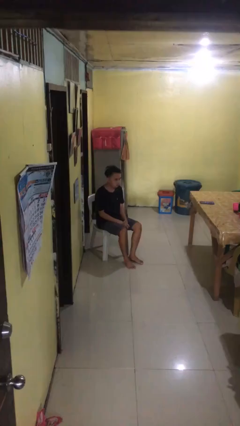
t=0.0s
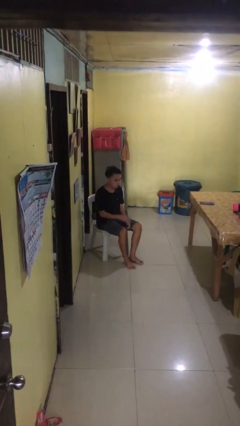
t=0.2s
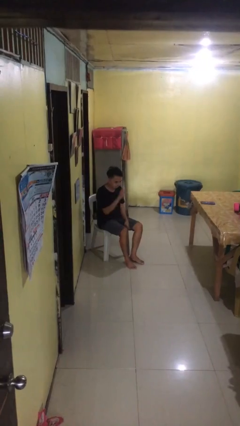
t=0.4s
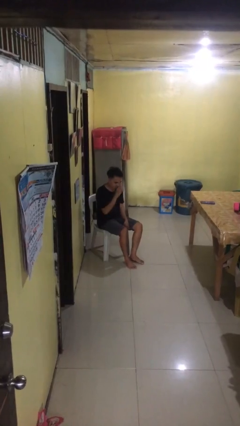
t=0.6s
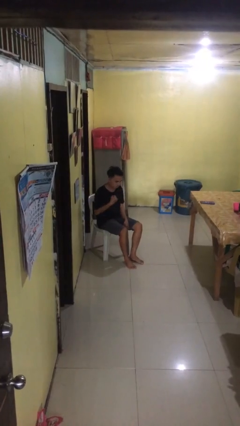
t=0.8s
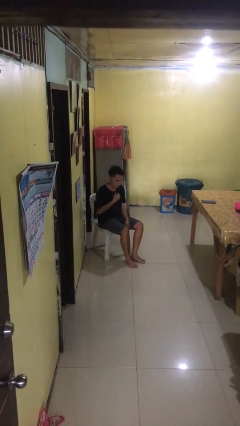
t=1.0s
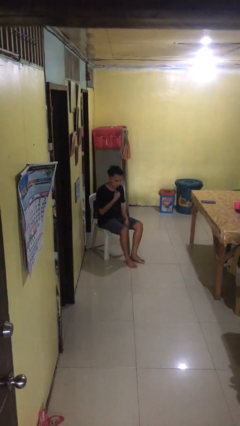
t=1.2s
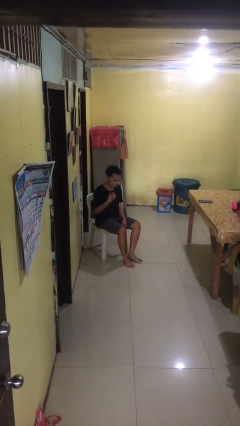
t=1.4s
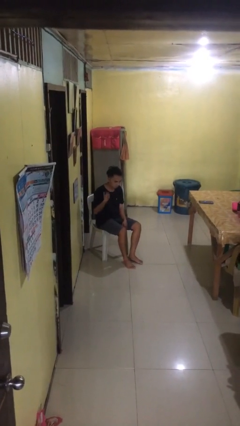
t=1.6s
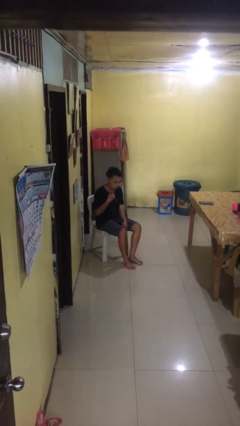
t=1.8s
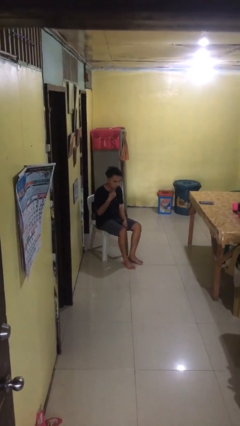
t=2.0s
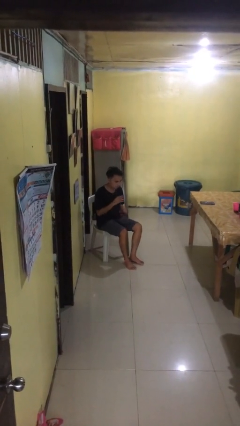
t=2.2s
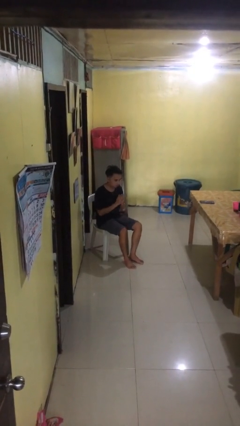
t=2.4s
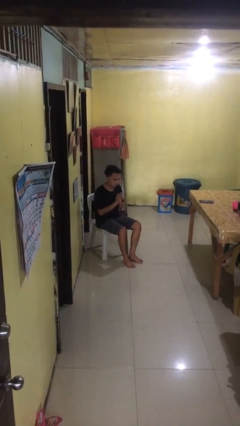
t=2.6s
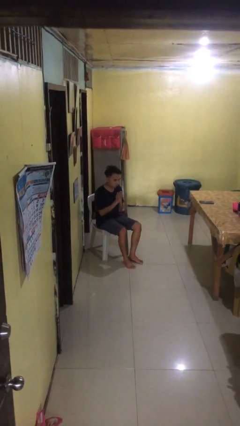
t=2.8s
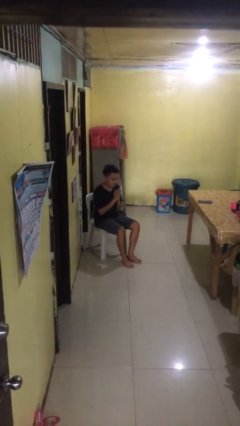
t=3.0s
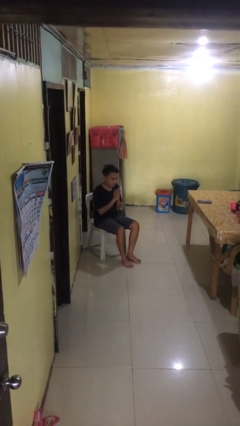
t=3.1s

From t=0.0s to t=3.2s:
person prays

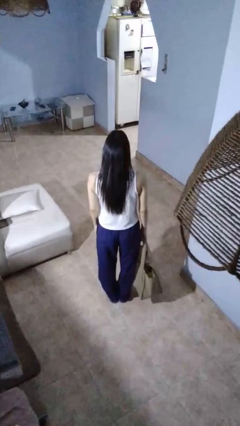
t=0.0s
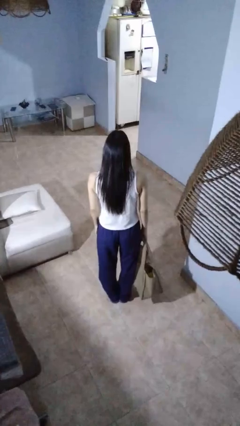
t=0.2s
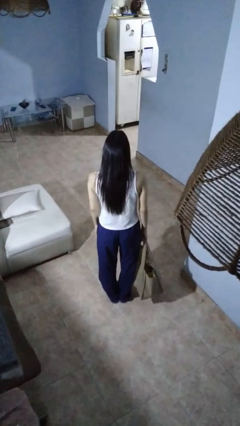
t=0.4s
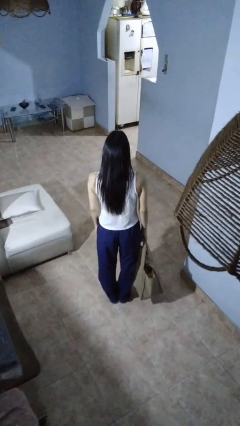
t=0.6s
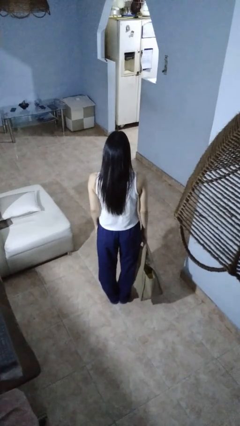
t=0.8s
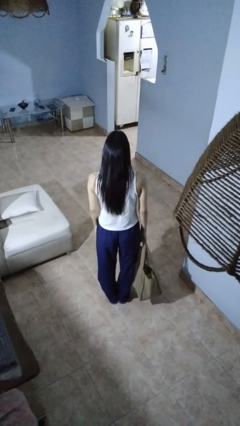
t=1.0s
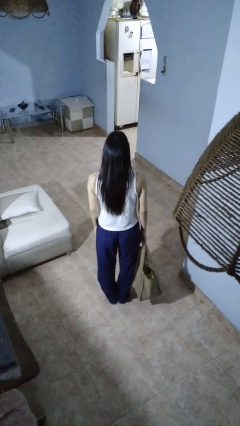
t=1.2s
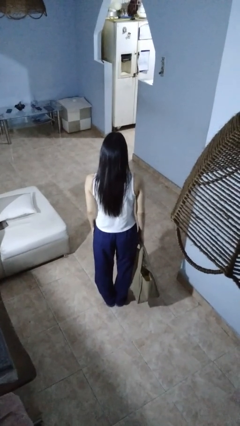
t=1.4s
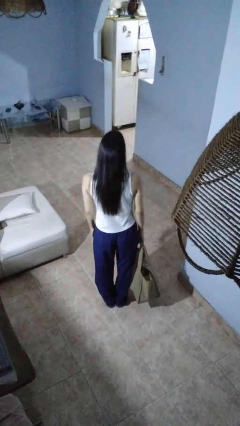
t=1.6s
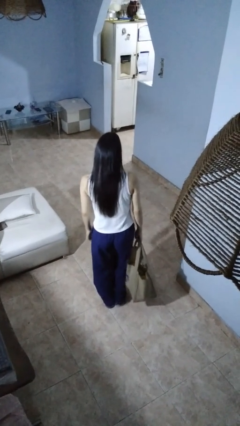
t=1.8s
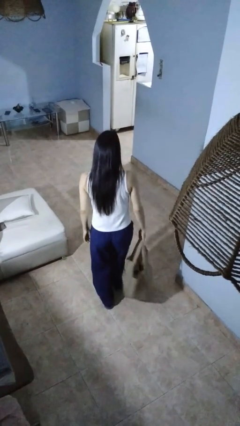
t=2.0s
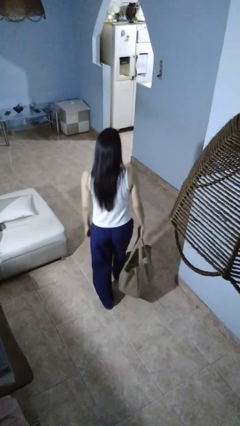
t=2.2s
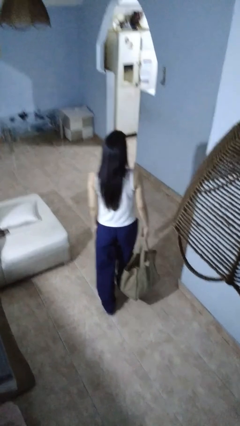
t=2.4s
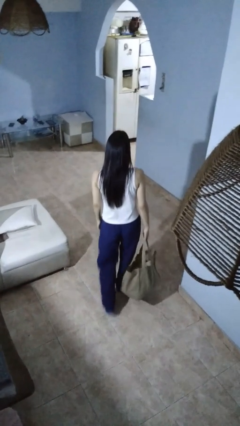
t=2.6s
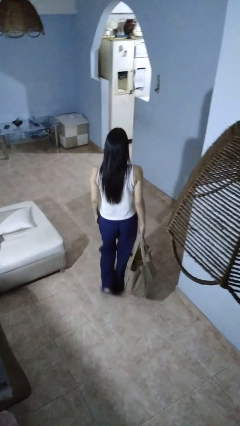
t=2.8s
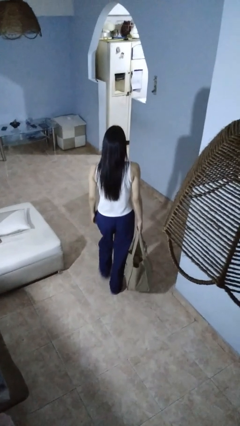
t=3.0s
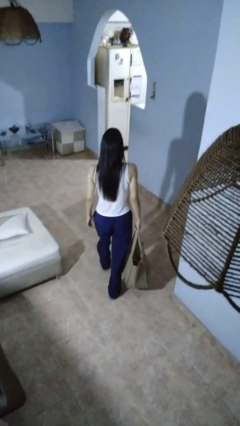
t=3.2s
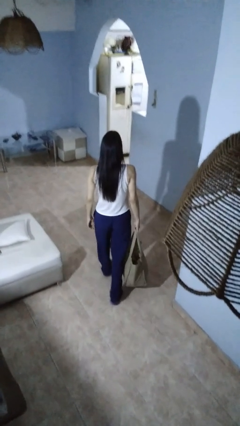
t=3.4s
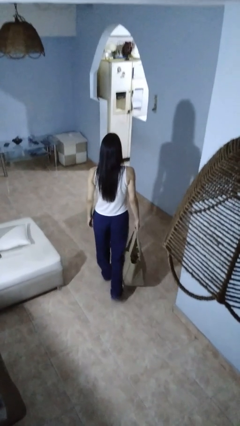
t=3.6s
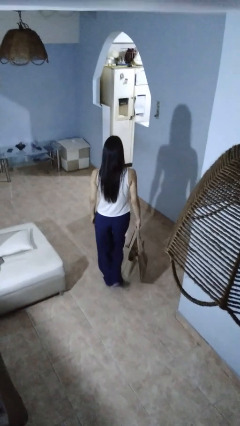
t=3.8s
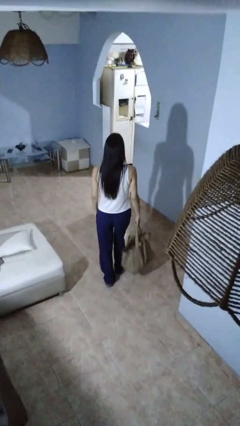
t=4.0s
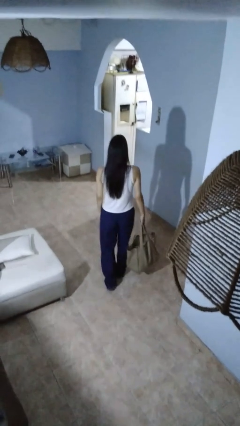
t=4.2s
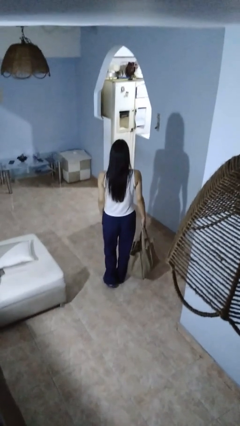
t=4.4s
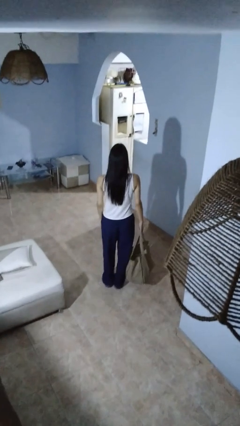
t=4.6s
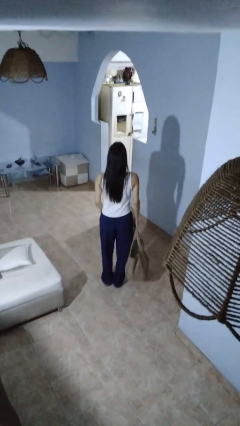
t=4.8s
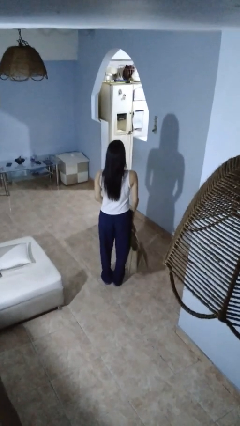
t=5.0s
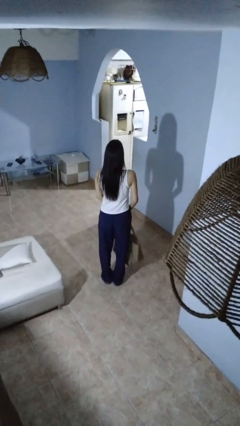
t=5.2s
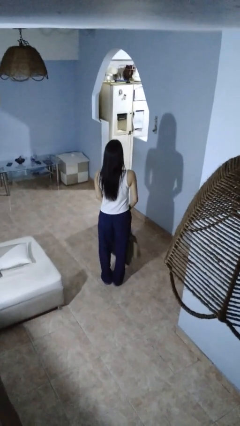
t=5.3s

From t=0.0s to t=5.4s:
person carries groceries

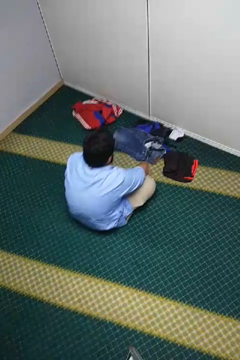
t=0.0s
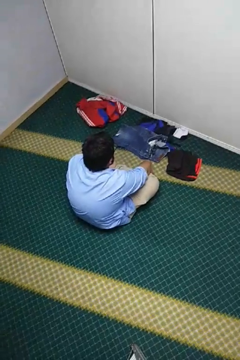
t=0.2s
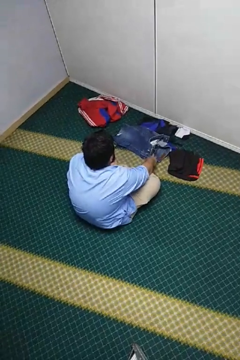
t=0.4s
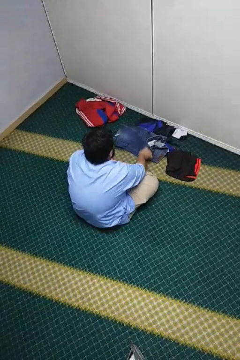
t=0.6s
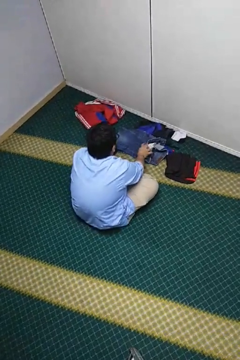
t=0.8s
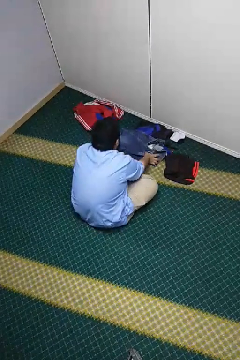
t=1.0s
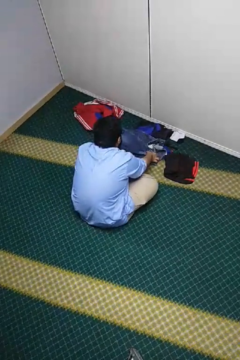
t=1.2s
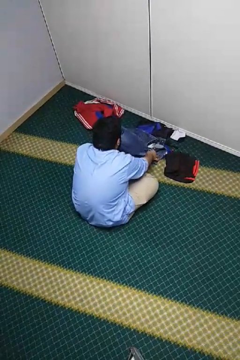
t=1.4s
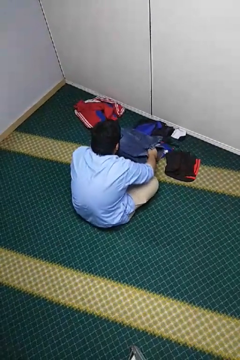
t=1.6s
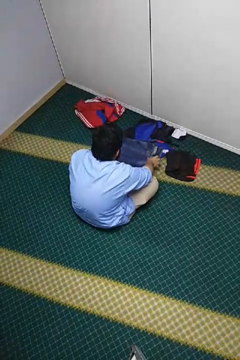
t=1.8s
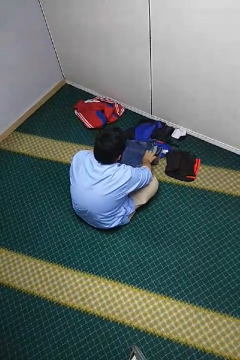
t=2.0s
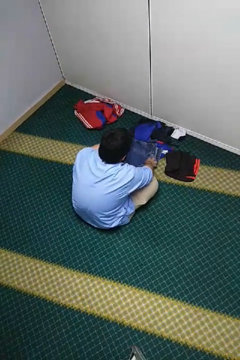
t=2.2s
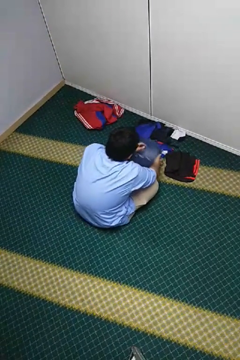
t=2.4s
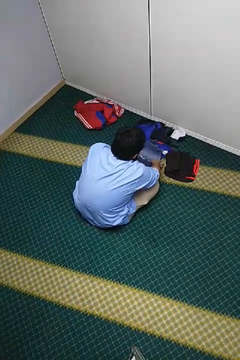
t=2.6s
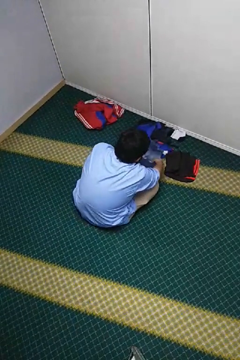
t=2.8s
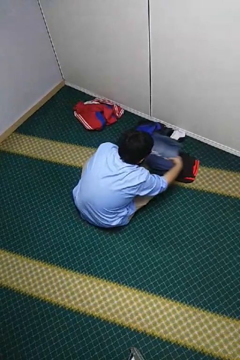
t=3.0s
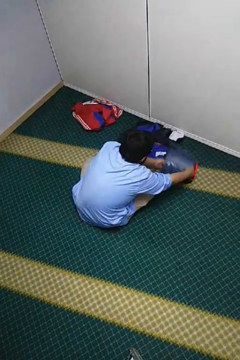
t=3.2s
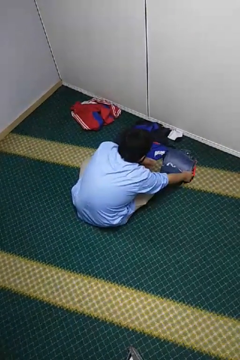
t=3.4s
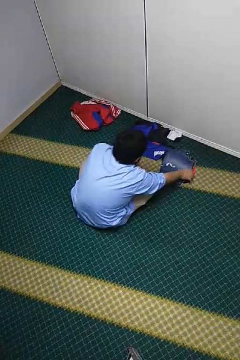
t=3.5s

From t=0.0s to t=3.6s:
person folds pants

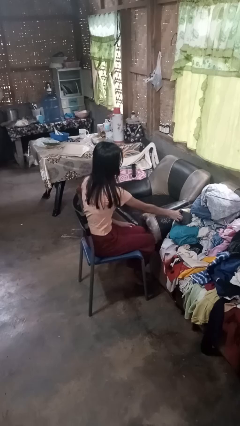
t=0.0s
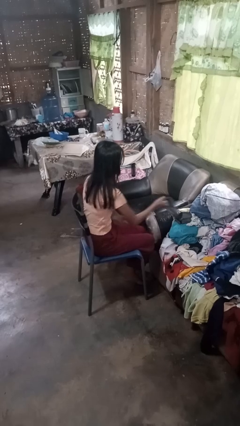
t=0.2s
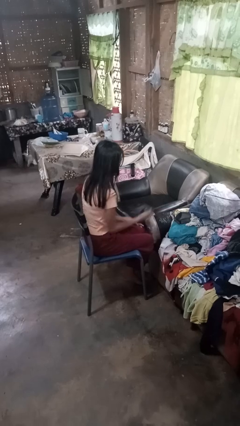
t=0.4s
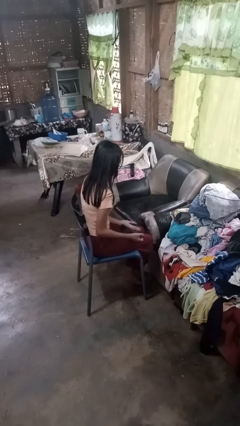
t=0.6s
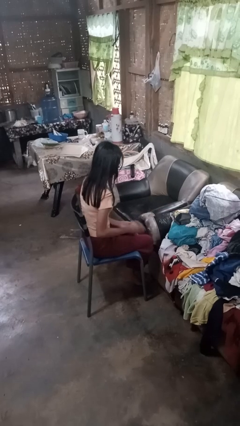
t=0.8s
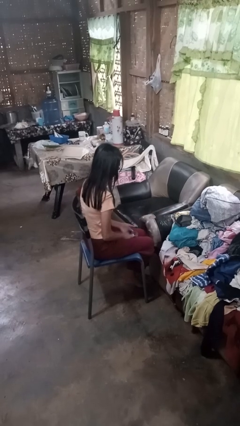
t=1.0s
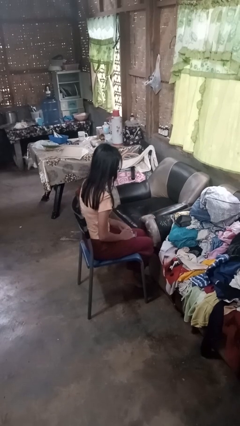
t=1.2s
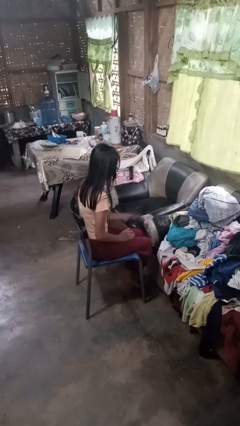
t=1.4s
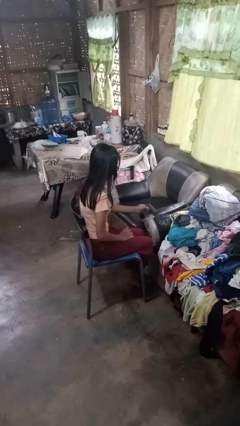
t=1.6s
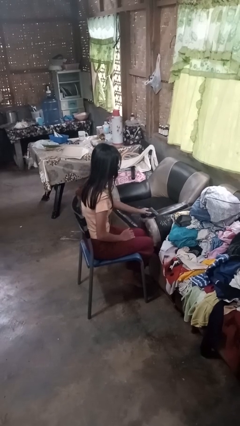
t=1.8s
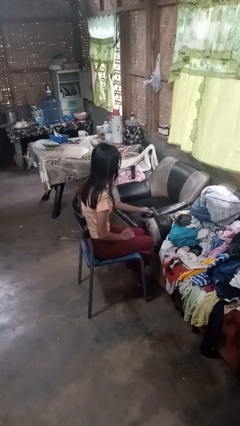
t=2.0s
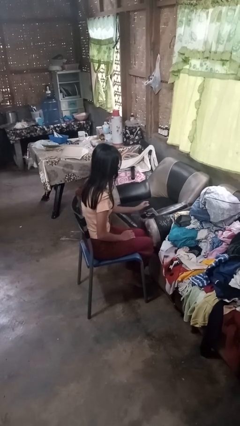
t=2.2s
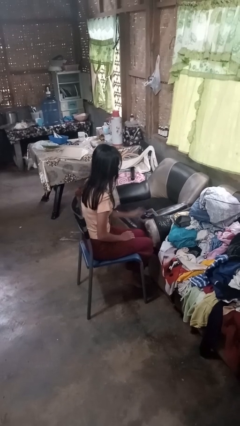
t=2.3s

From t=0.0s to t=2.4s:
person folds socks

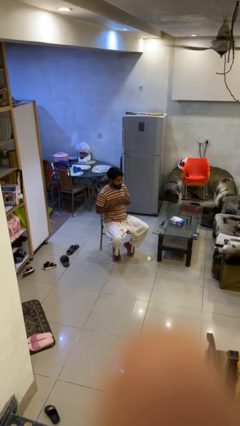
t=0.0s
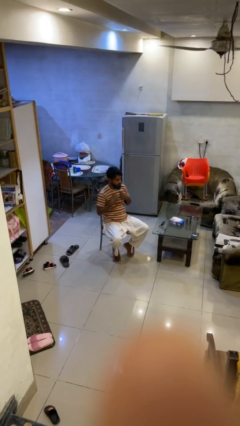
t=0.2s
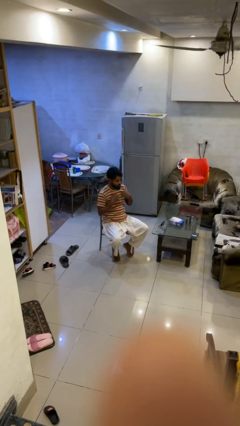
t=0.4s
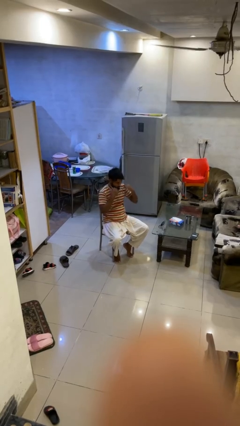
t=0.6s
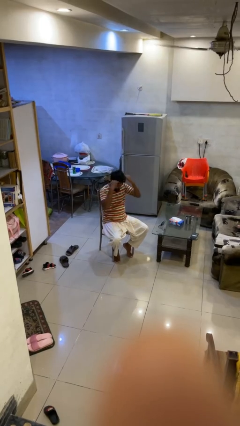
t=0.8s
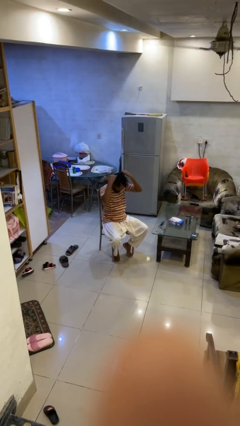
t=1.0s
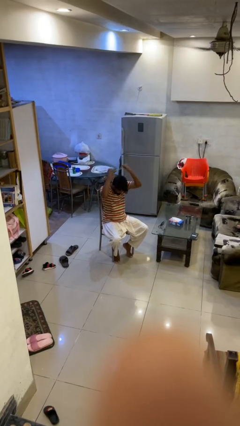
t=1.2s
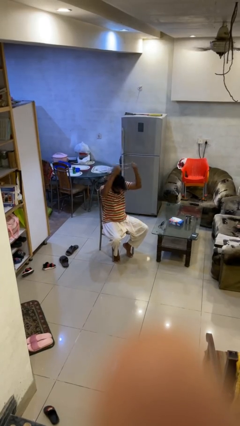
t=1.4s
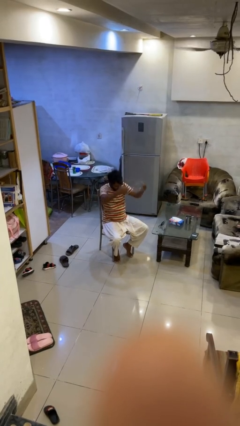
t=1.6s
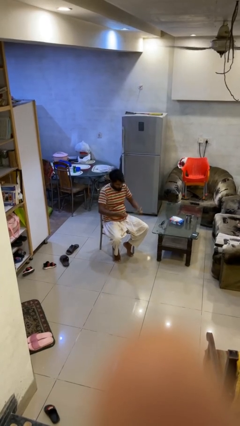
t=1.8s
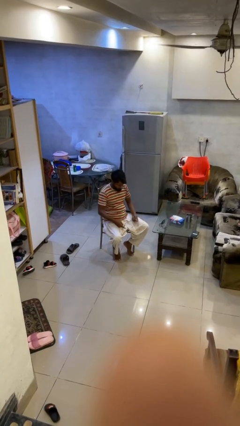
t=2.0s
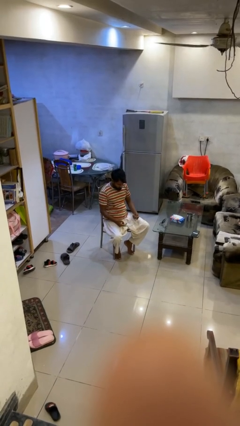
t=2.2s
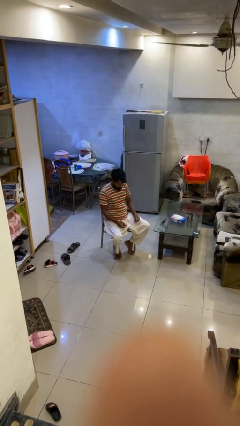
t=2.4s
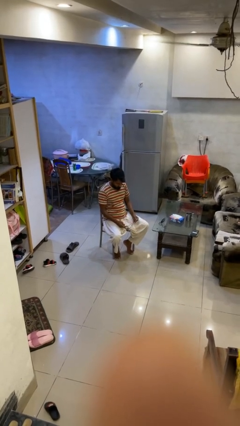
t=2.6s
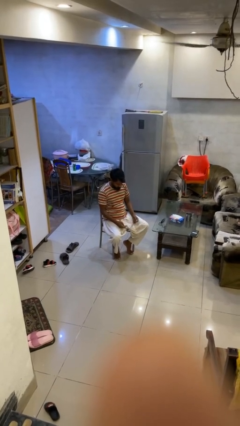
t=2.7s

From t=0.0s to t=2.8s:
person takes off necklace

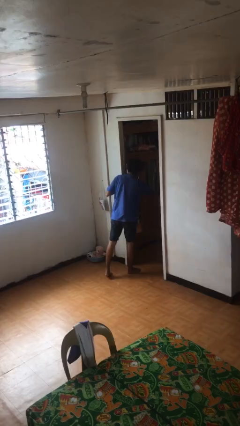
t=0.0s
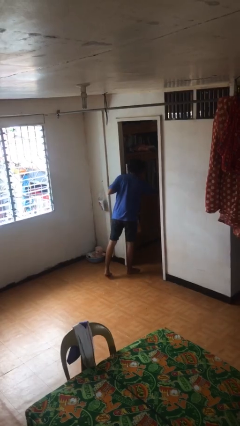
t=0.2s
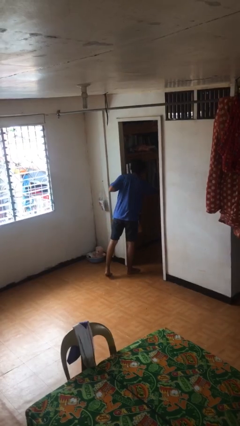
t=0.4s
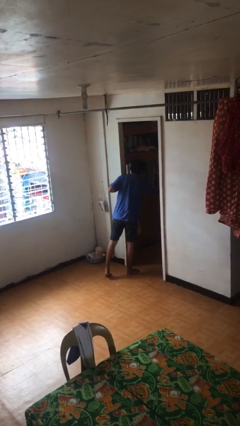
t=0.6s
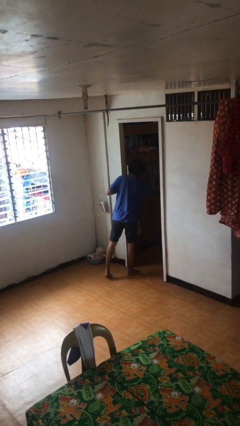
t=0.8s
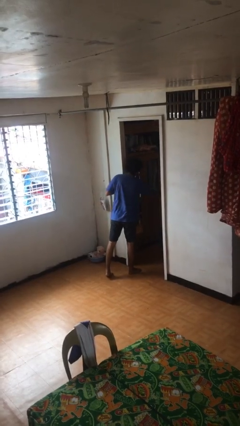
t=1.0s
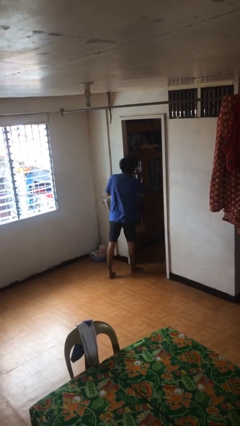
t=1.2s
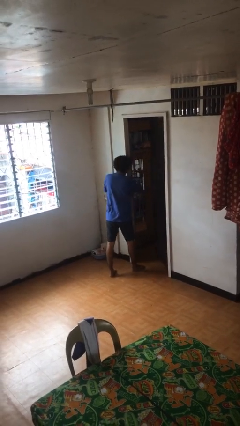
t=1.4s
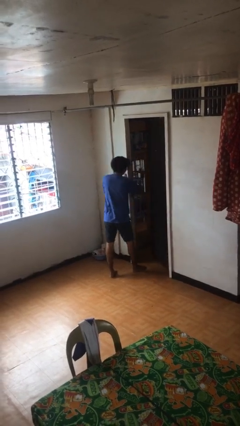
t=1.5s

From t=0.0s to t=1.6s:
person closes facility door
